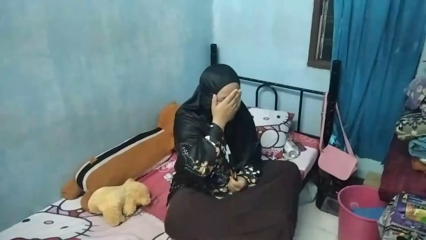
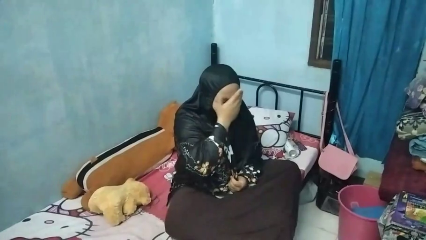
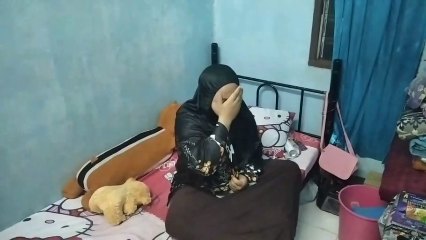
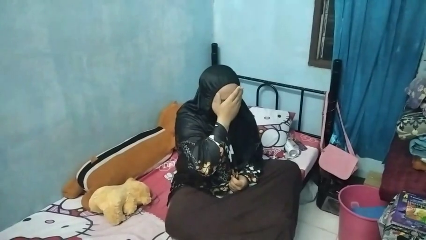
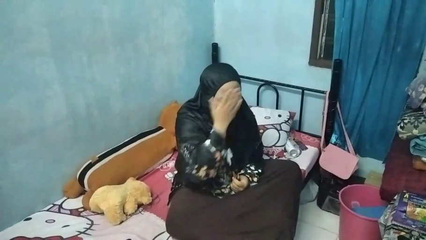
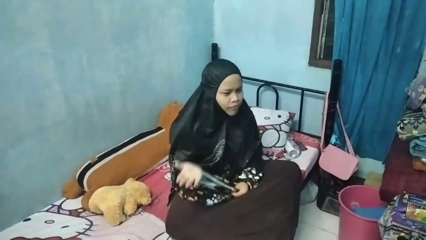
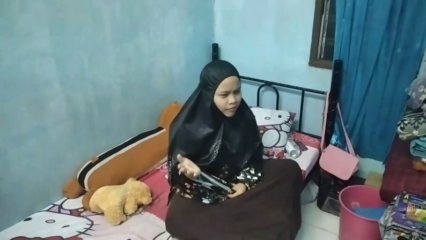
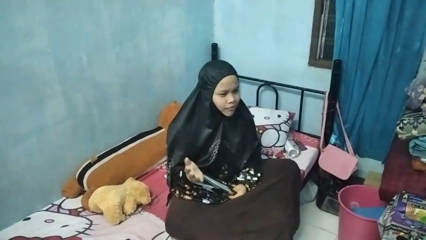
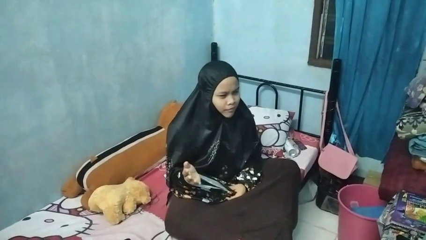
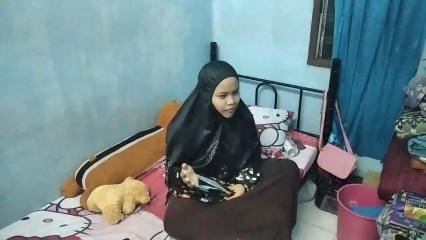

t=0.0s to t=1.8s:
person covers face with hands

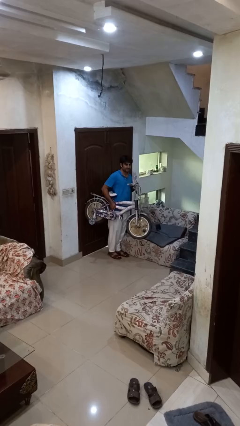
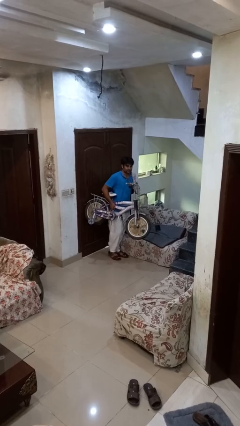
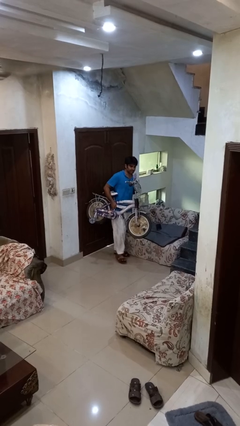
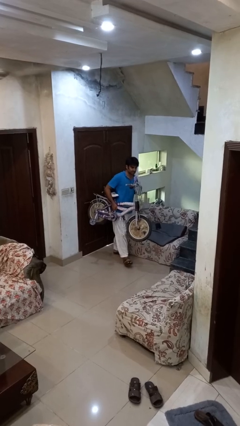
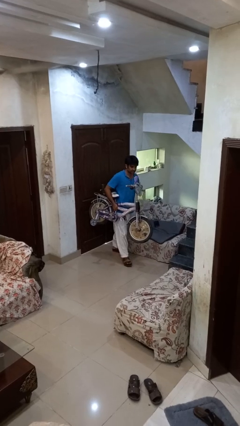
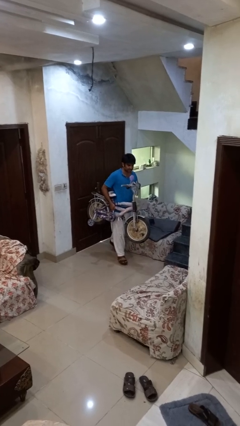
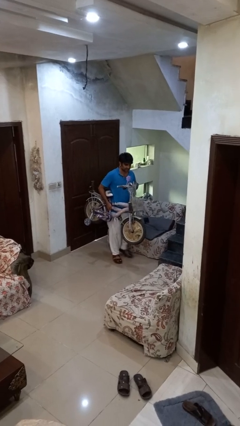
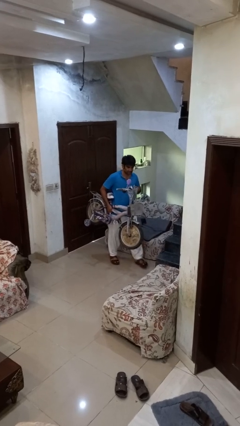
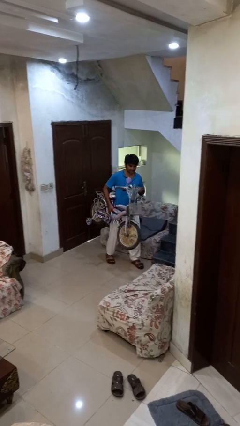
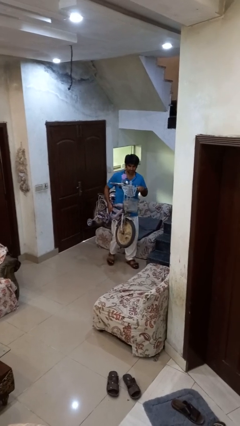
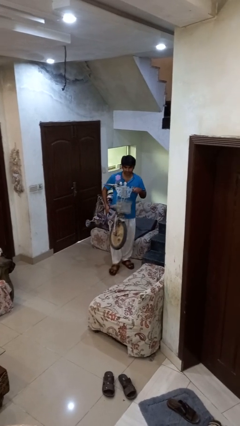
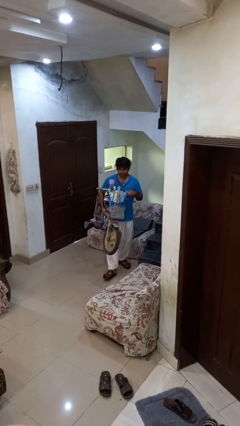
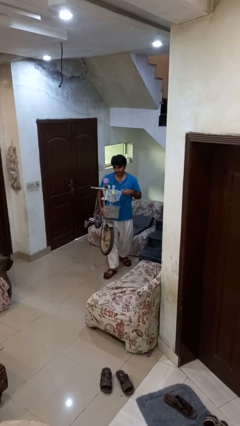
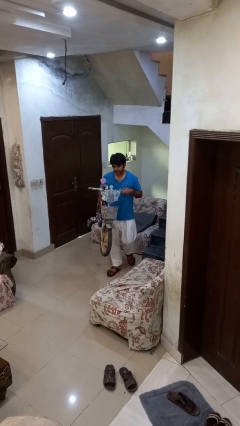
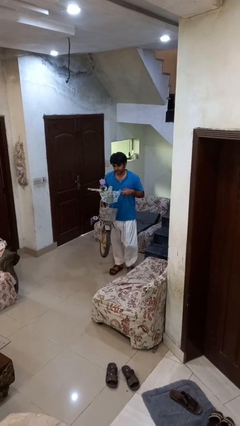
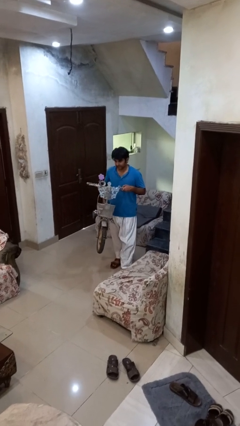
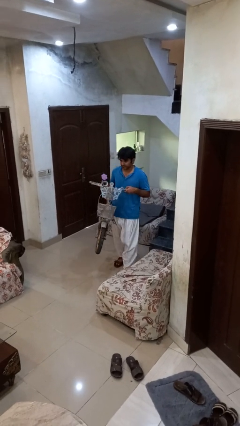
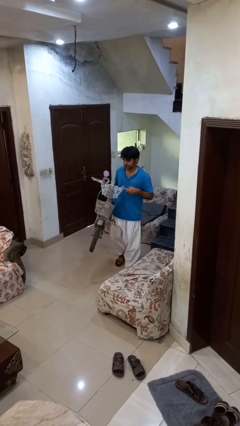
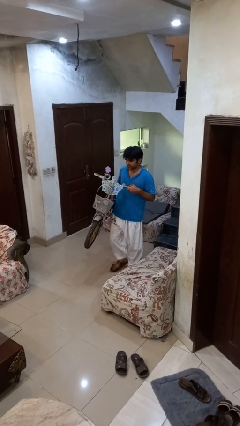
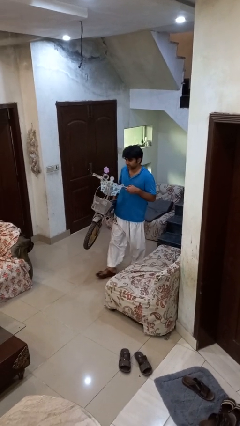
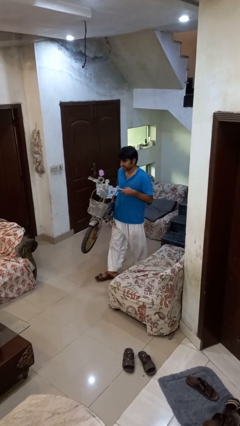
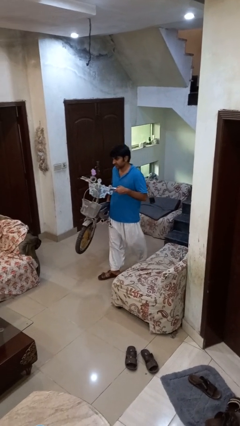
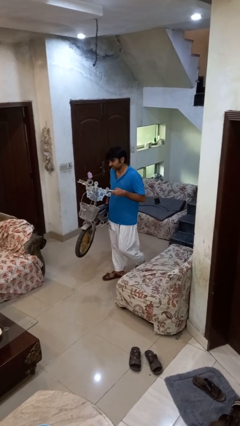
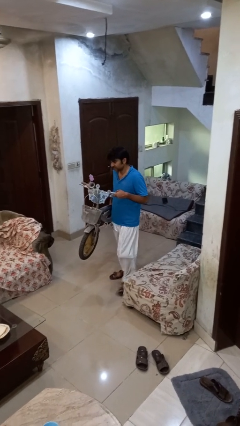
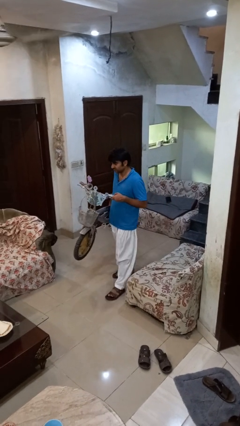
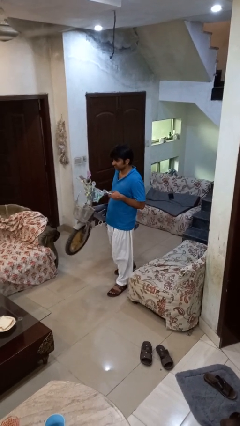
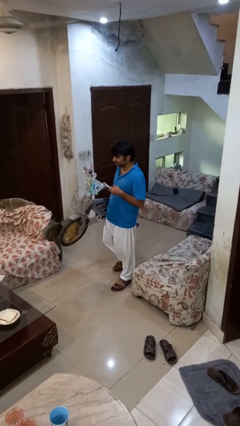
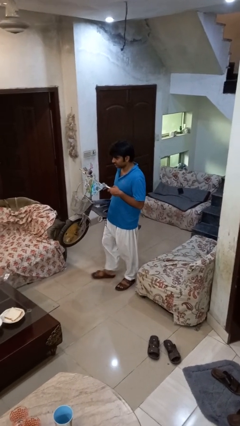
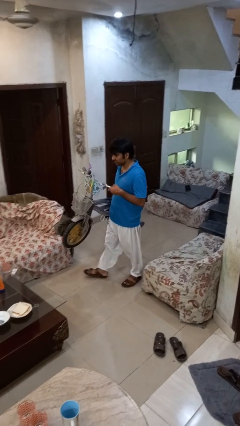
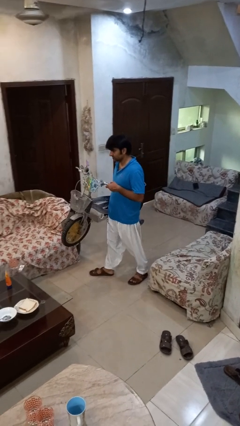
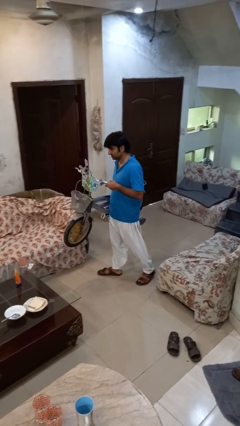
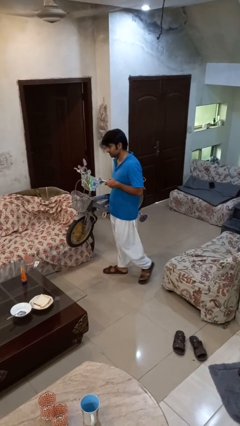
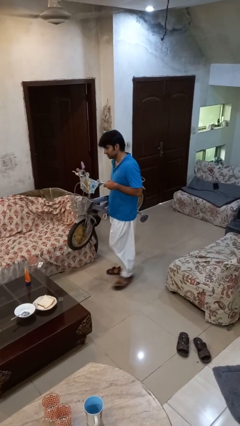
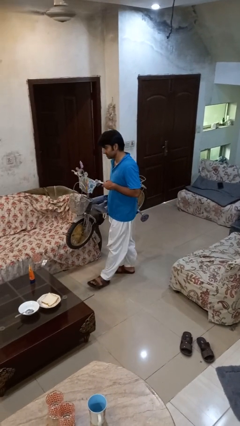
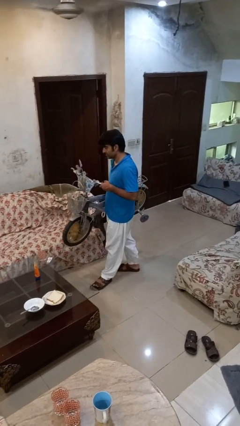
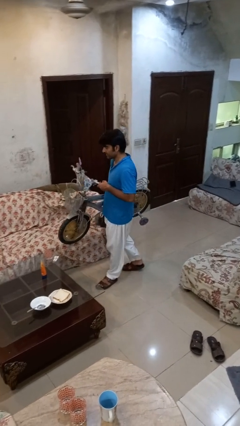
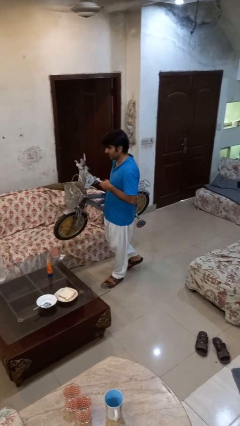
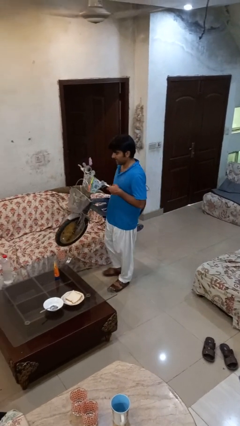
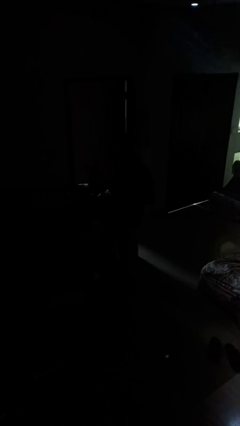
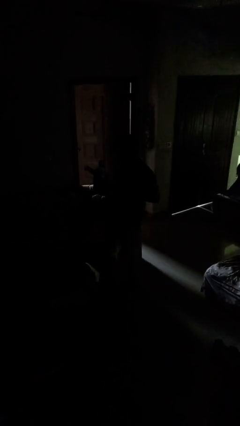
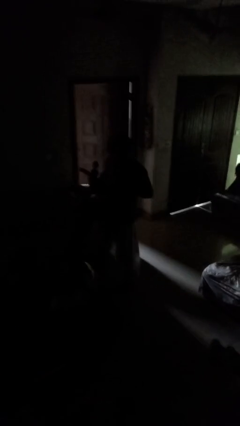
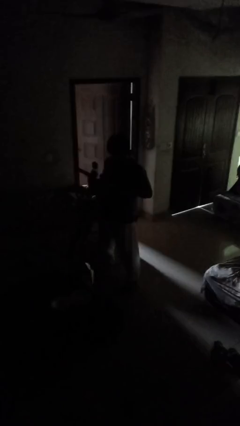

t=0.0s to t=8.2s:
person carries bicycle

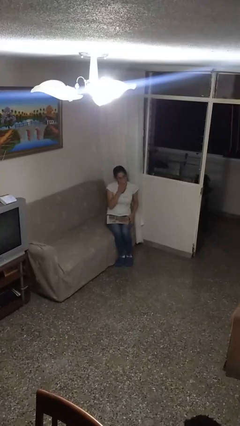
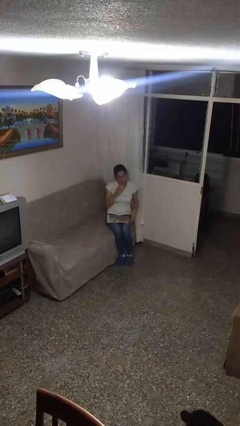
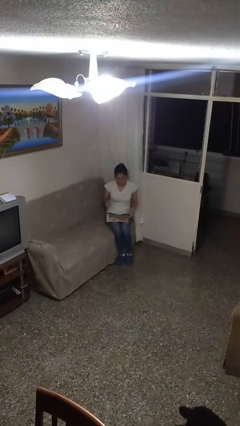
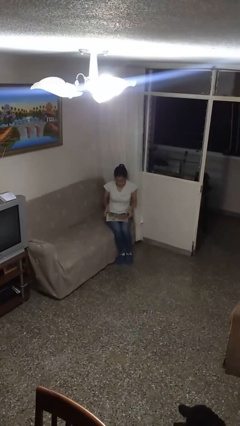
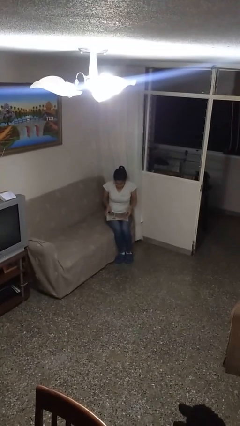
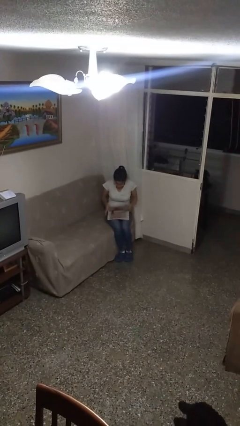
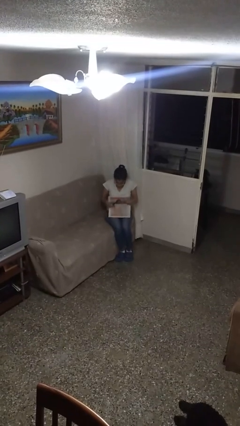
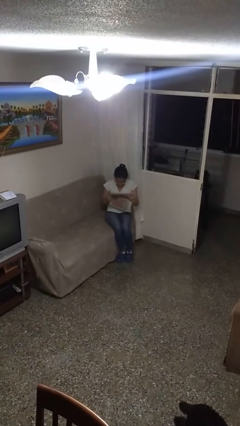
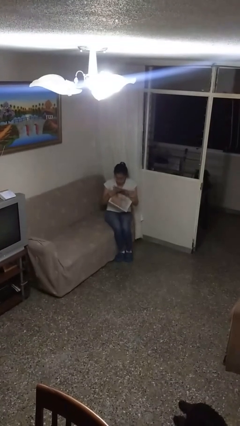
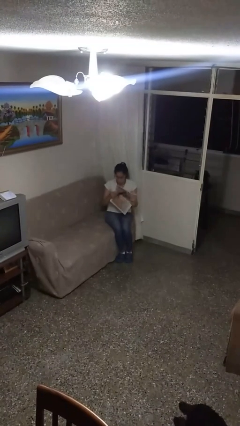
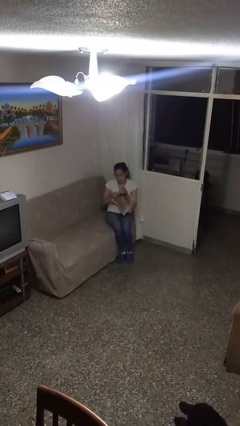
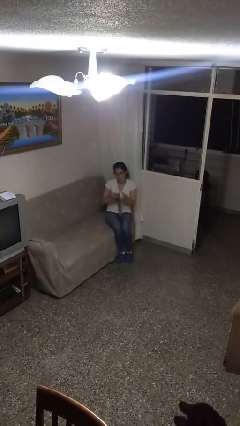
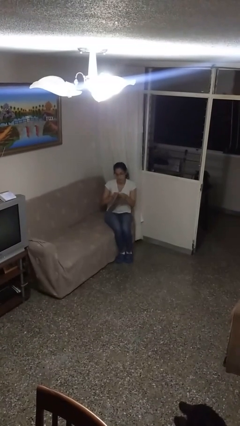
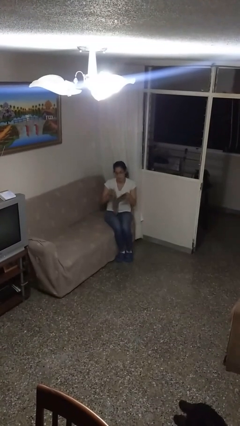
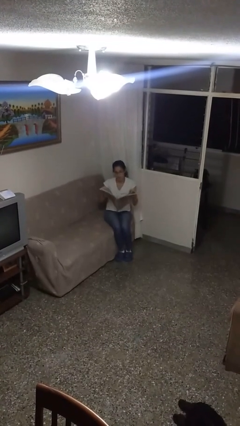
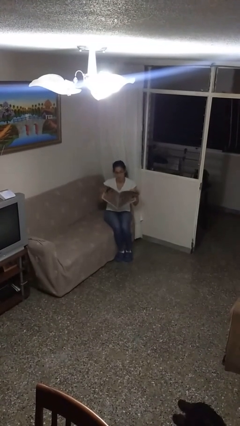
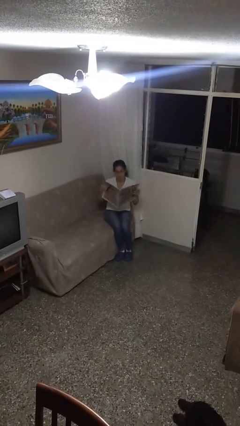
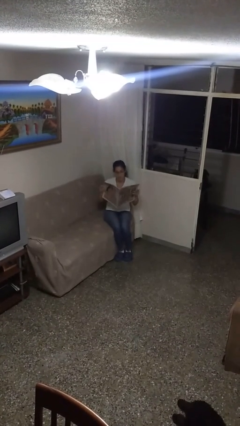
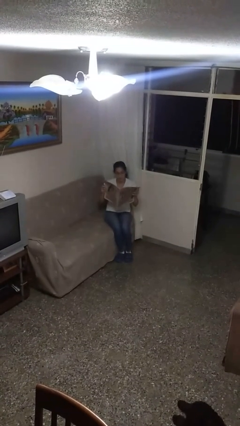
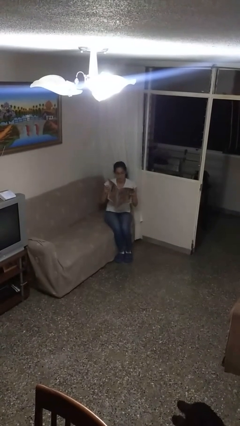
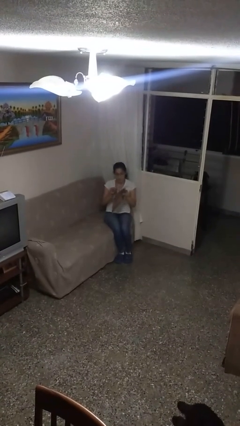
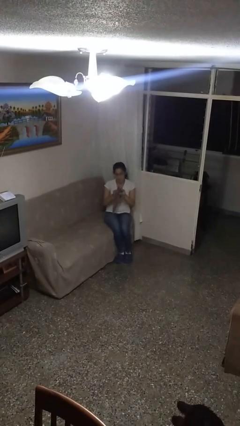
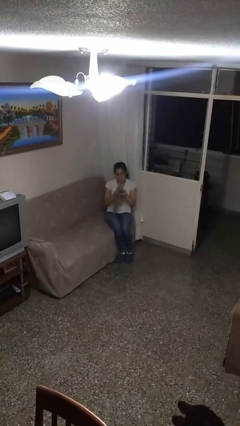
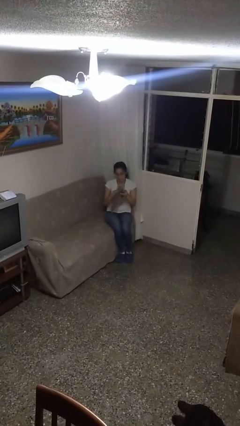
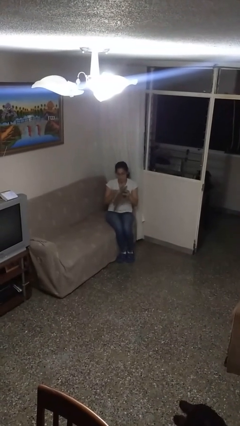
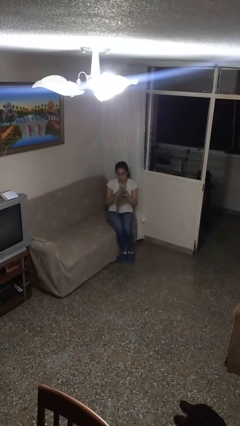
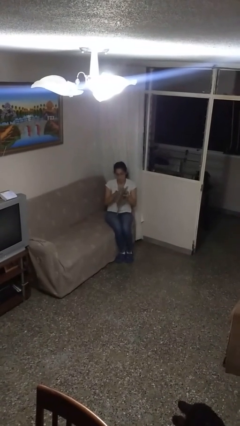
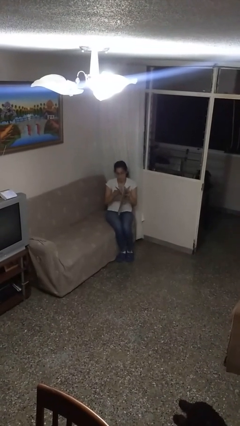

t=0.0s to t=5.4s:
person reads newspaper

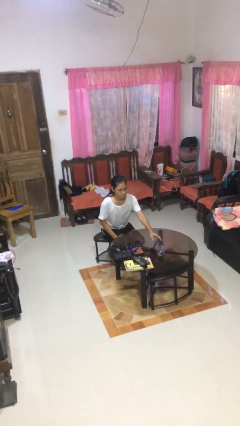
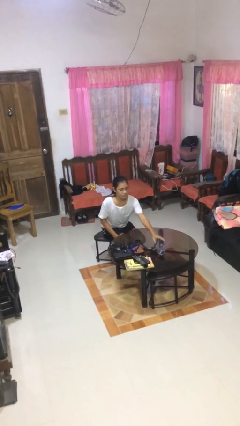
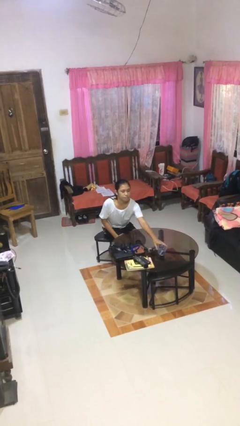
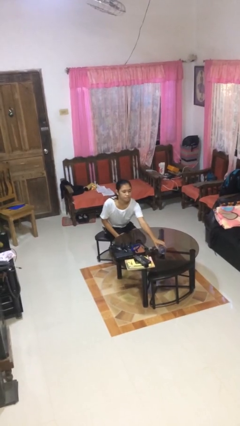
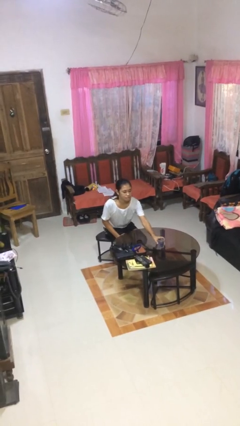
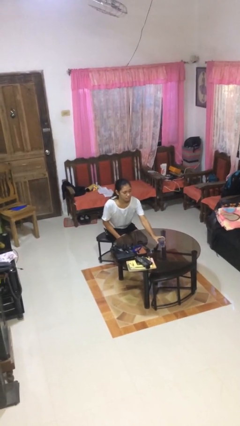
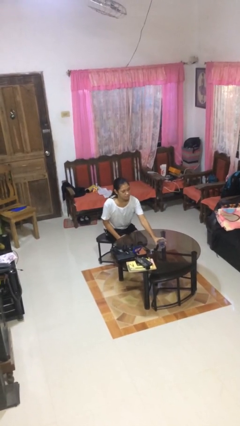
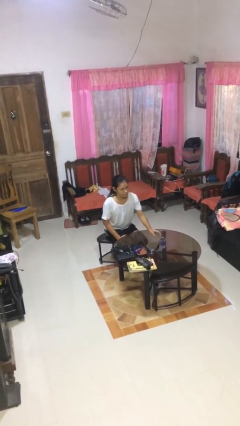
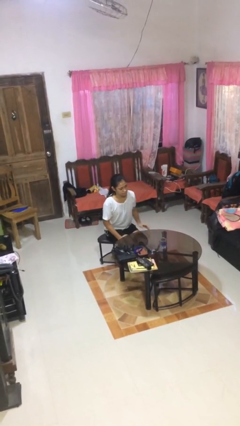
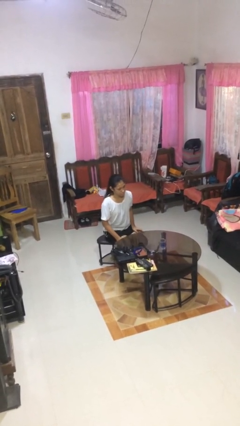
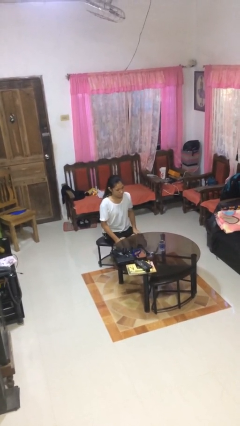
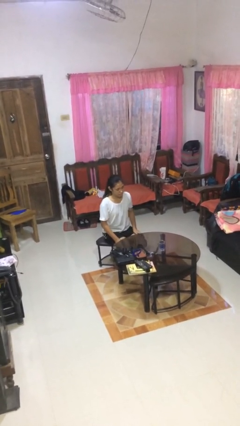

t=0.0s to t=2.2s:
person sets upright glass

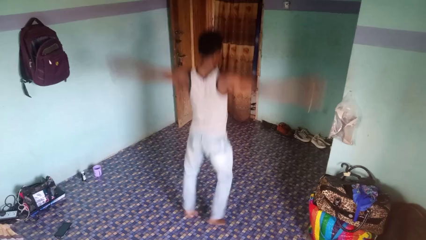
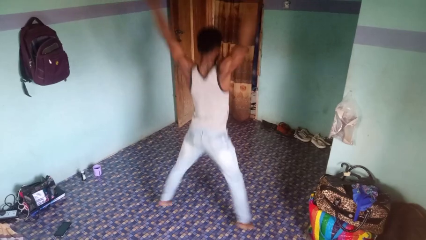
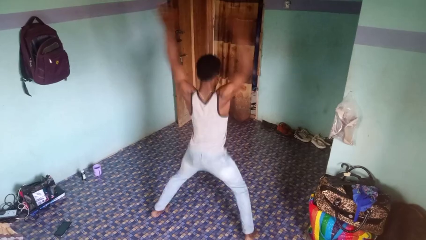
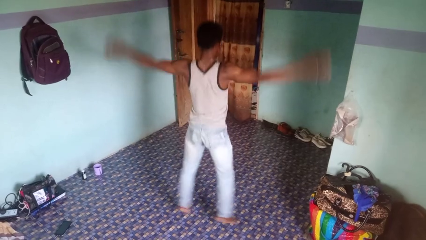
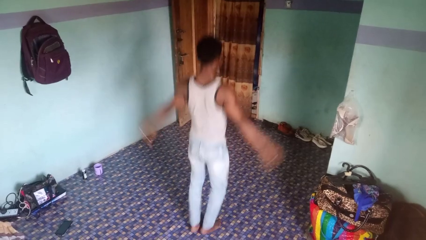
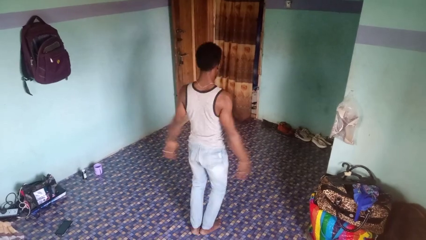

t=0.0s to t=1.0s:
person exercises with jumping jacks
